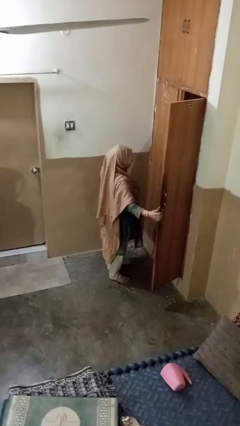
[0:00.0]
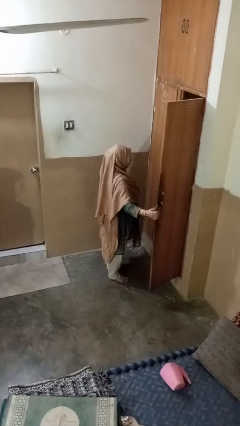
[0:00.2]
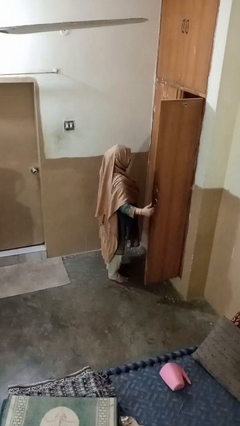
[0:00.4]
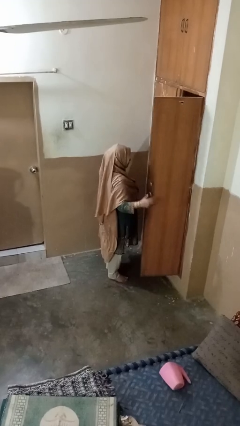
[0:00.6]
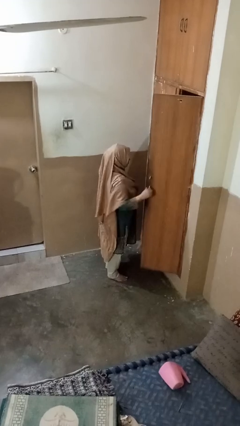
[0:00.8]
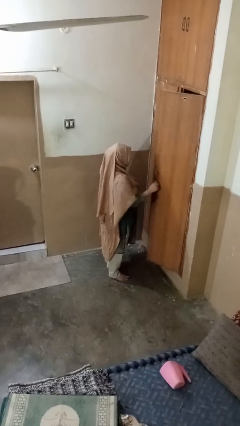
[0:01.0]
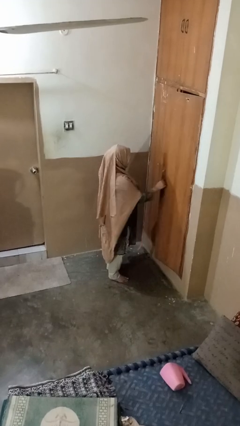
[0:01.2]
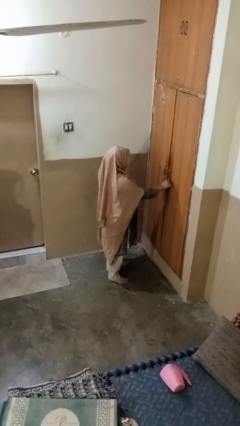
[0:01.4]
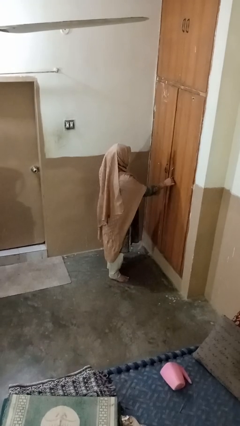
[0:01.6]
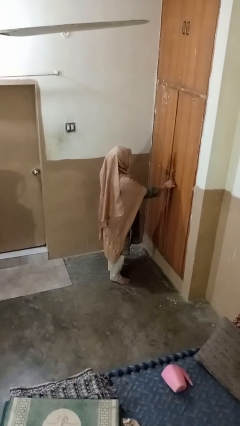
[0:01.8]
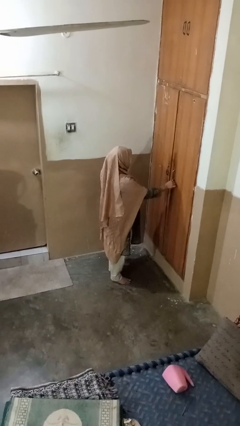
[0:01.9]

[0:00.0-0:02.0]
person closes closet door

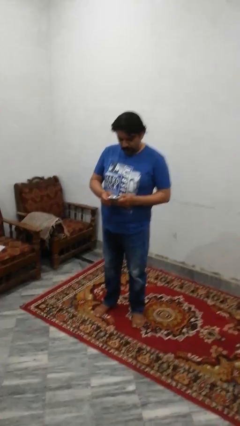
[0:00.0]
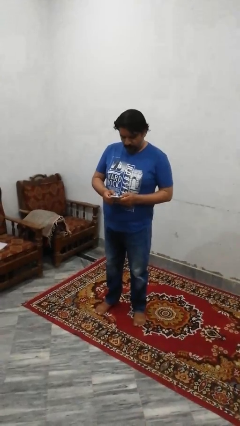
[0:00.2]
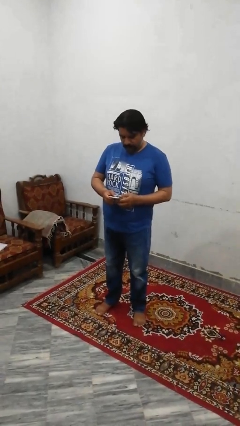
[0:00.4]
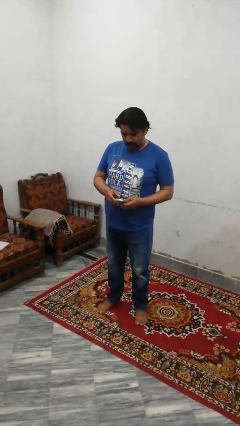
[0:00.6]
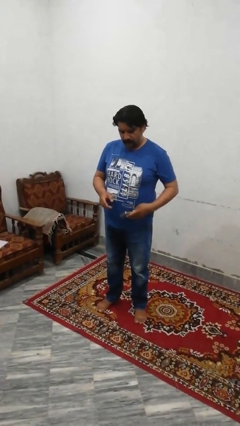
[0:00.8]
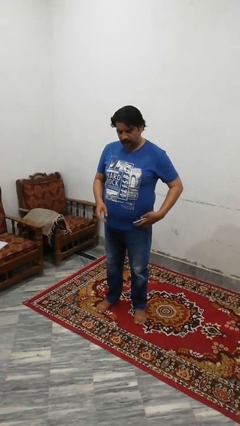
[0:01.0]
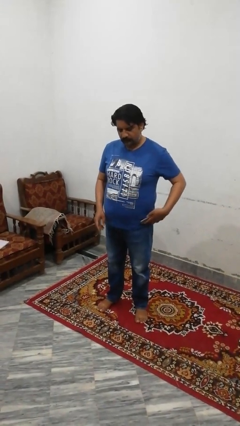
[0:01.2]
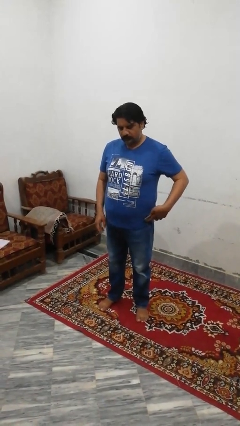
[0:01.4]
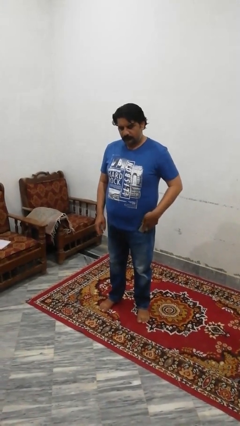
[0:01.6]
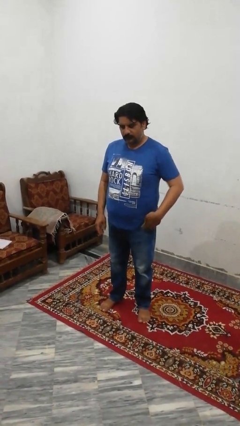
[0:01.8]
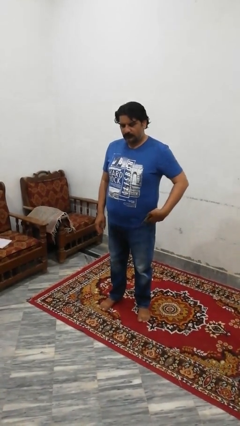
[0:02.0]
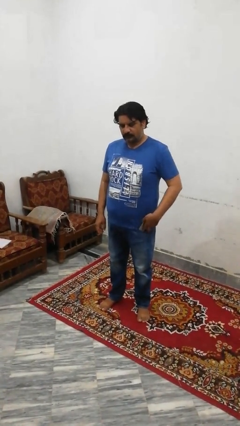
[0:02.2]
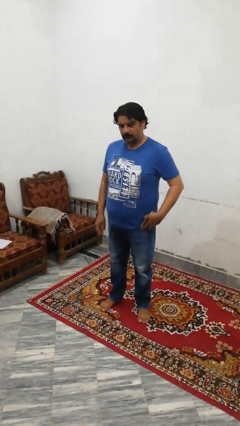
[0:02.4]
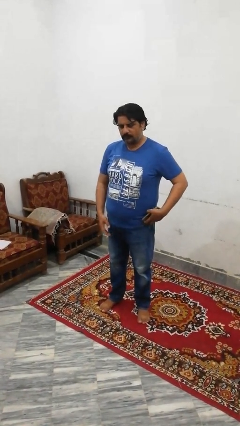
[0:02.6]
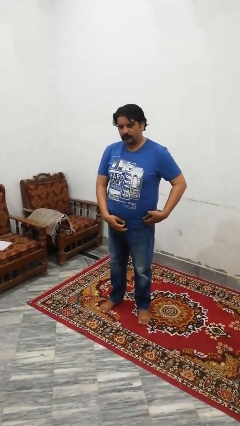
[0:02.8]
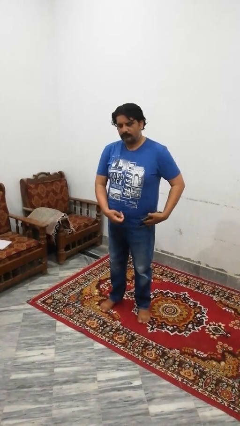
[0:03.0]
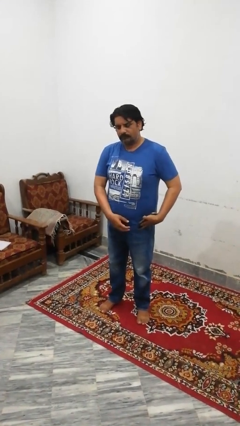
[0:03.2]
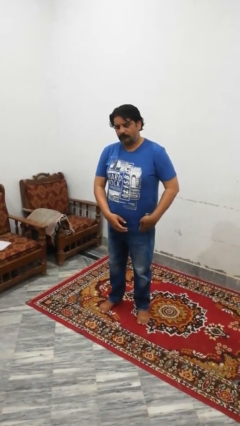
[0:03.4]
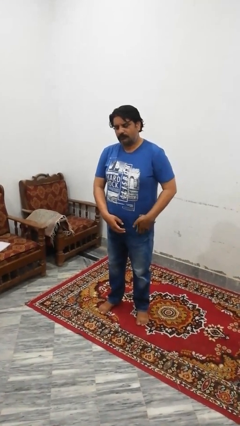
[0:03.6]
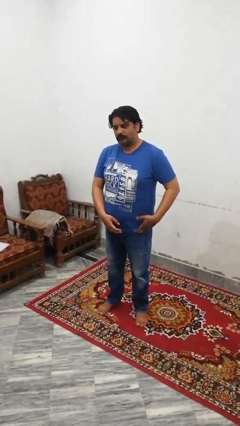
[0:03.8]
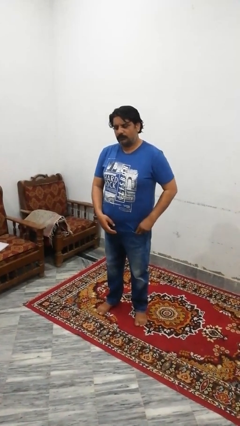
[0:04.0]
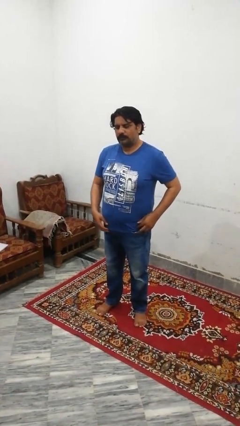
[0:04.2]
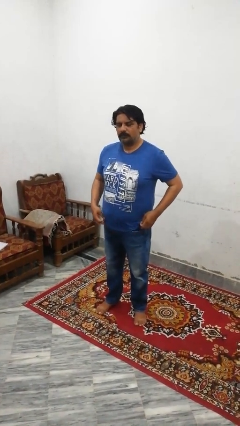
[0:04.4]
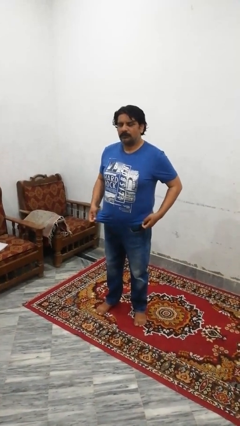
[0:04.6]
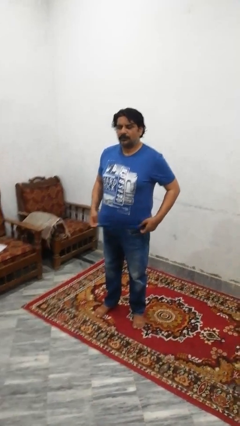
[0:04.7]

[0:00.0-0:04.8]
person puts phone into pocket

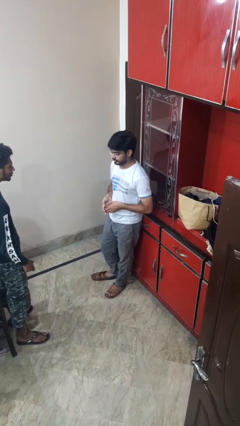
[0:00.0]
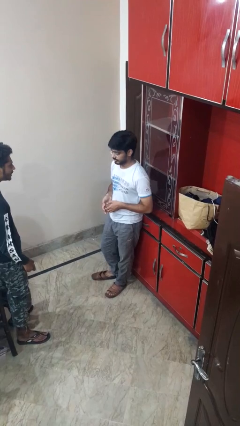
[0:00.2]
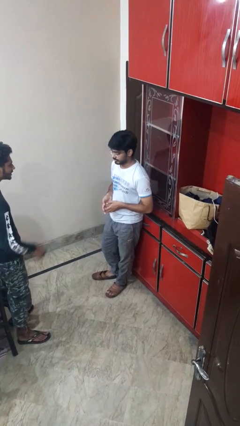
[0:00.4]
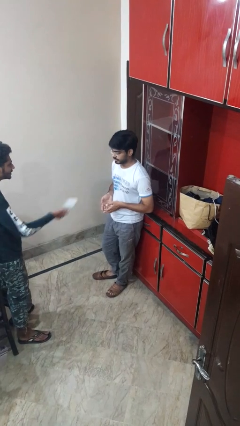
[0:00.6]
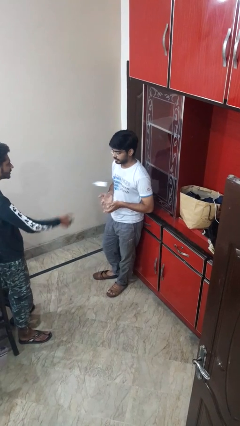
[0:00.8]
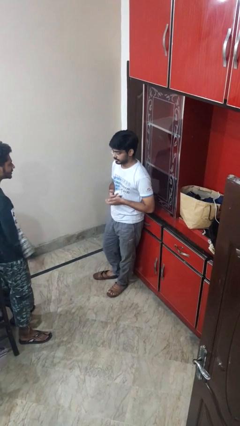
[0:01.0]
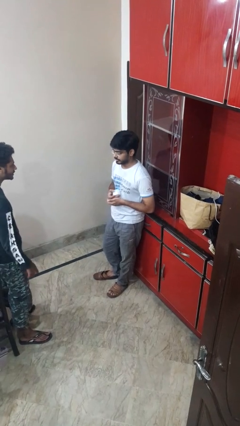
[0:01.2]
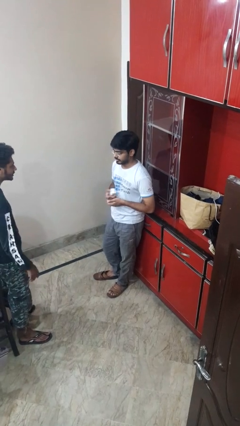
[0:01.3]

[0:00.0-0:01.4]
person catches object from person

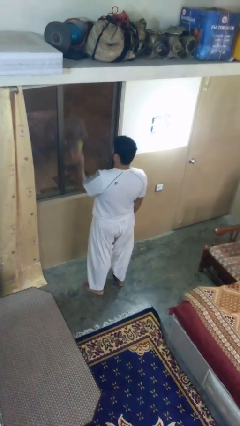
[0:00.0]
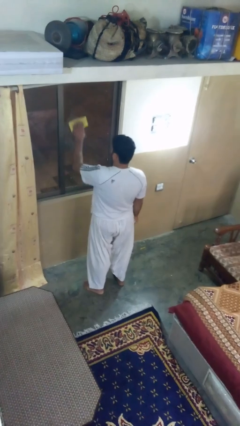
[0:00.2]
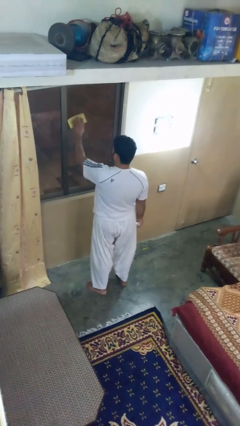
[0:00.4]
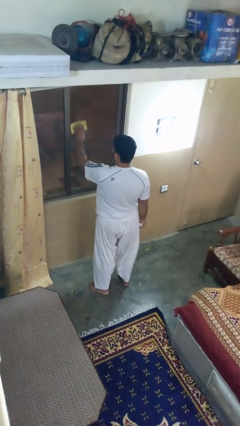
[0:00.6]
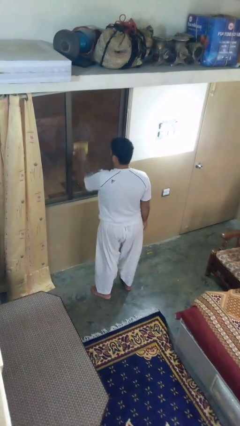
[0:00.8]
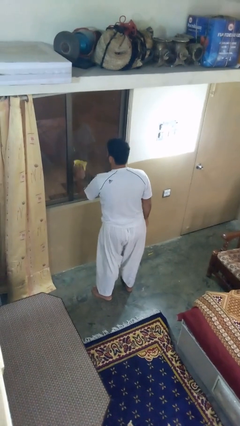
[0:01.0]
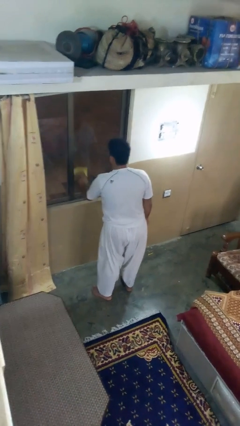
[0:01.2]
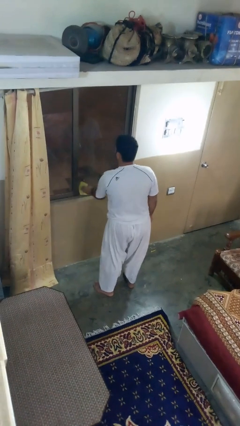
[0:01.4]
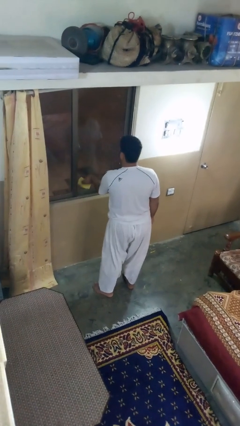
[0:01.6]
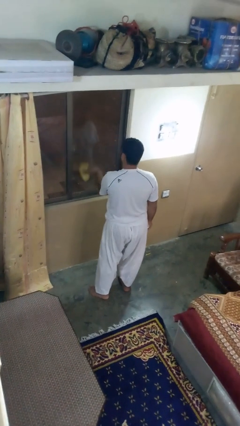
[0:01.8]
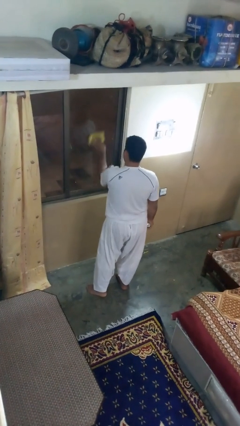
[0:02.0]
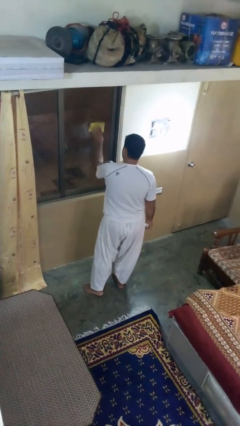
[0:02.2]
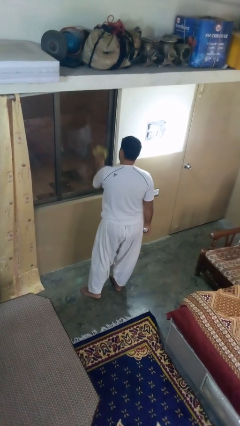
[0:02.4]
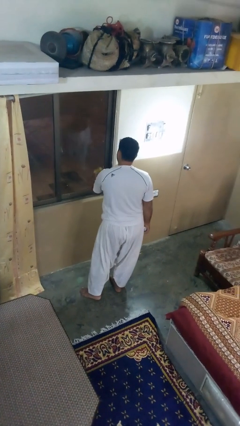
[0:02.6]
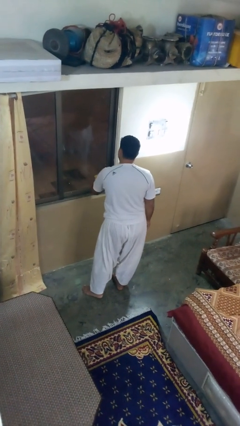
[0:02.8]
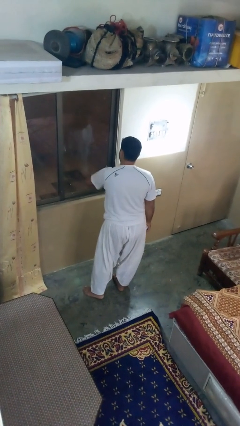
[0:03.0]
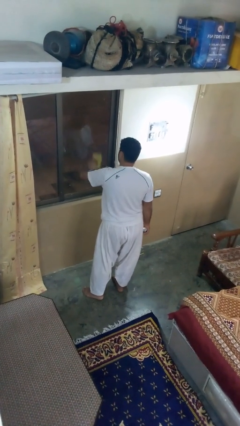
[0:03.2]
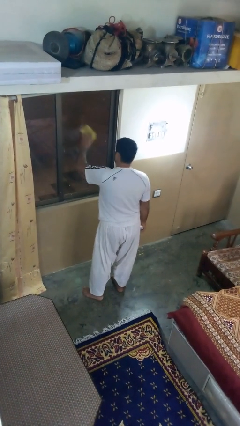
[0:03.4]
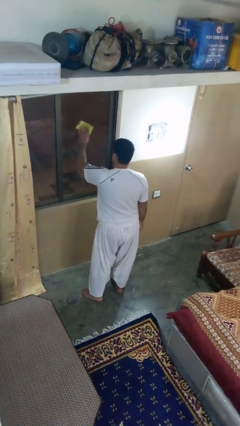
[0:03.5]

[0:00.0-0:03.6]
person washes window

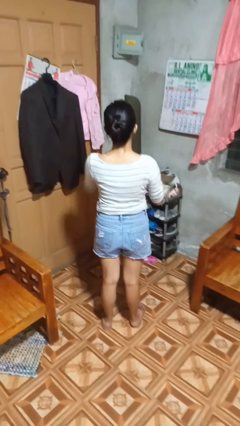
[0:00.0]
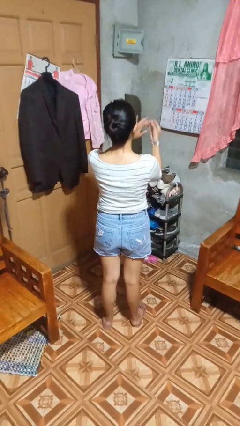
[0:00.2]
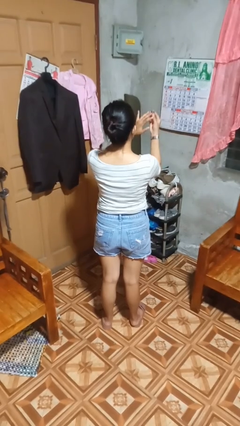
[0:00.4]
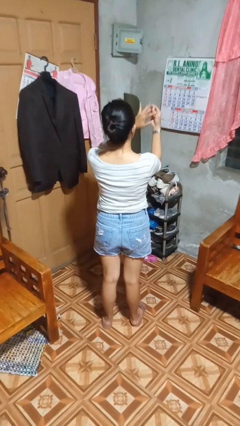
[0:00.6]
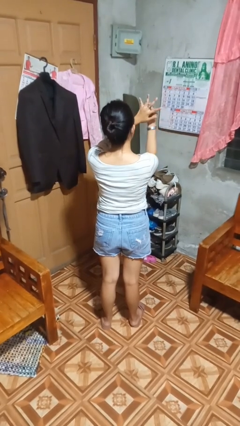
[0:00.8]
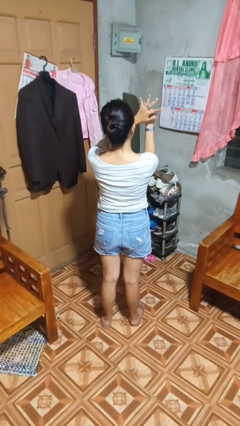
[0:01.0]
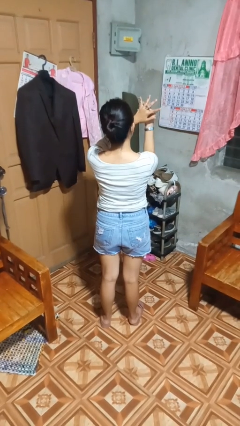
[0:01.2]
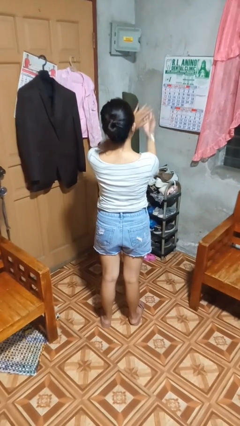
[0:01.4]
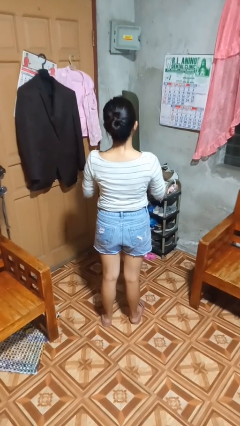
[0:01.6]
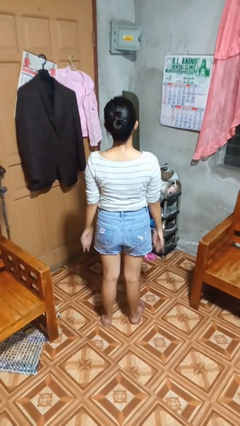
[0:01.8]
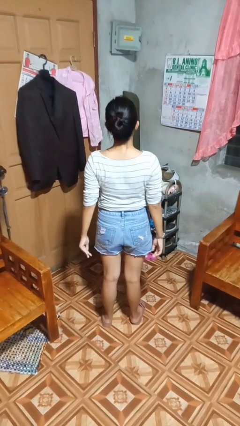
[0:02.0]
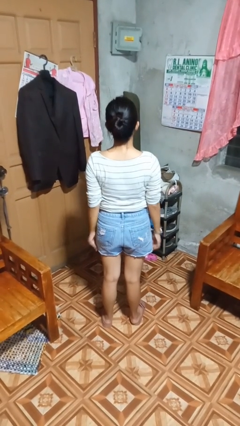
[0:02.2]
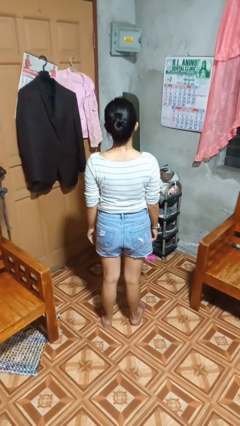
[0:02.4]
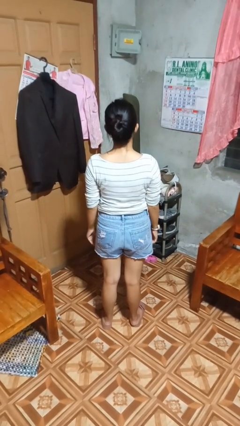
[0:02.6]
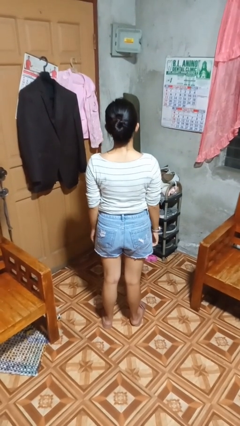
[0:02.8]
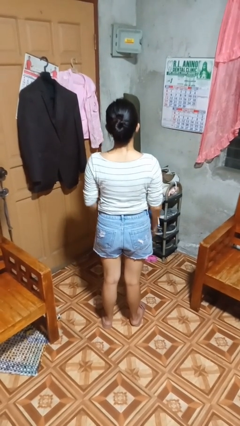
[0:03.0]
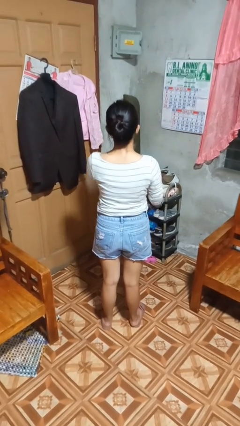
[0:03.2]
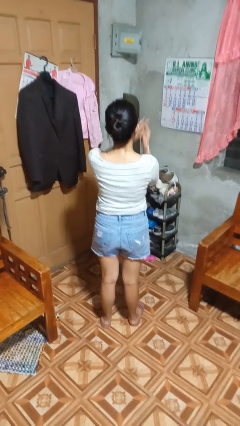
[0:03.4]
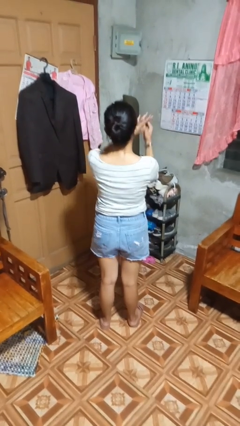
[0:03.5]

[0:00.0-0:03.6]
person puts on ring

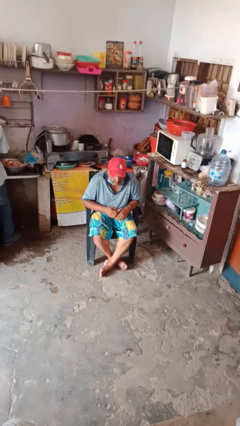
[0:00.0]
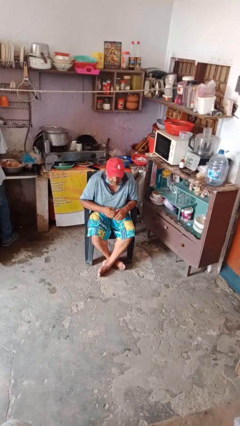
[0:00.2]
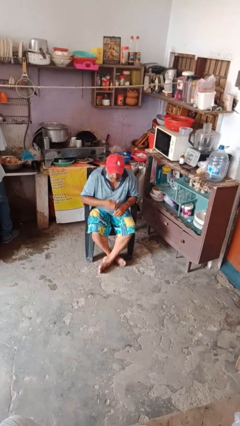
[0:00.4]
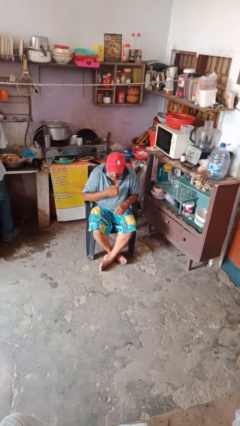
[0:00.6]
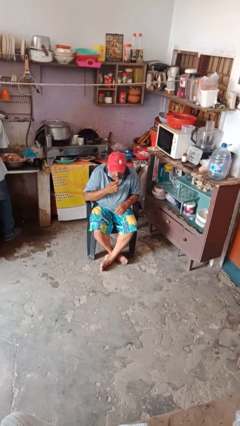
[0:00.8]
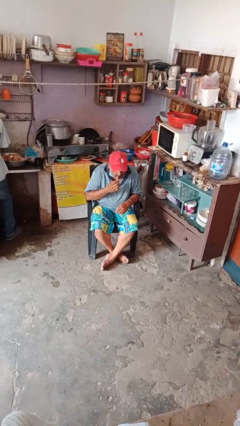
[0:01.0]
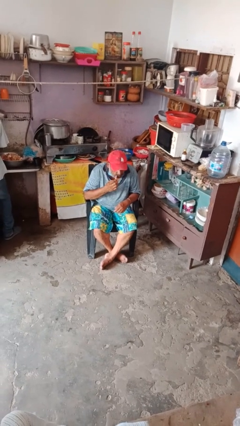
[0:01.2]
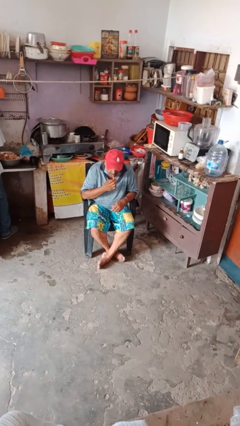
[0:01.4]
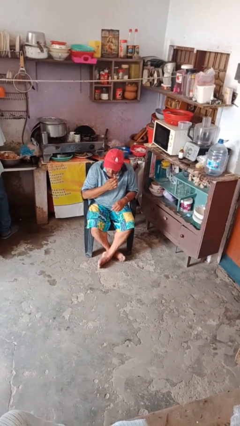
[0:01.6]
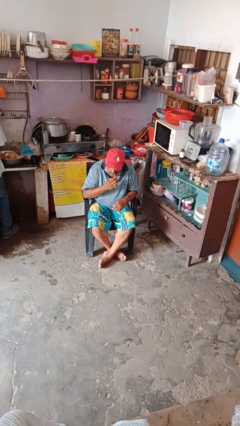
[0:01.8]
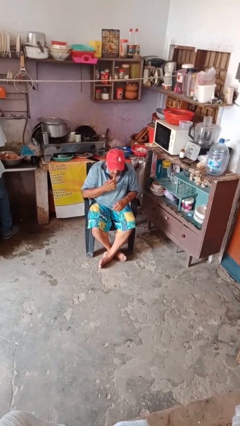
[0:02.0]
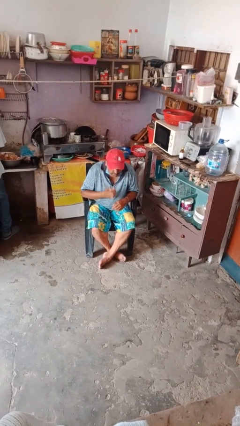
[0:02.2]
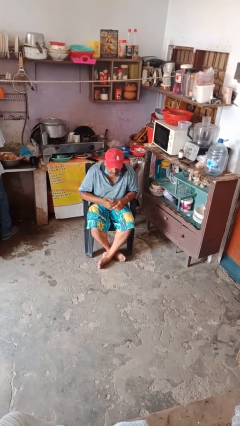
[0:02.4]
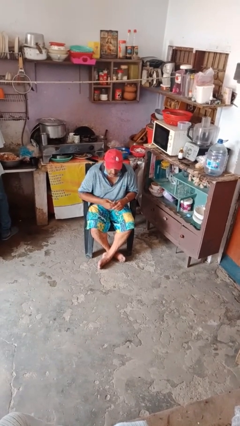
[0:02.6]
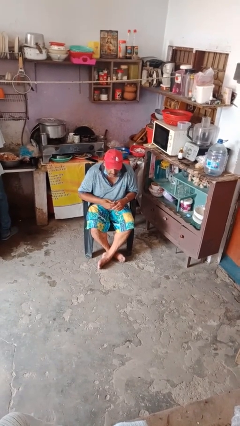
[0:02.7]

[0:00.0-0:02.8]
person applies lip makeup
